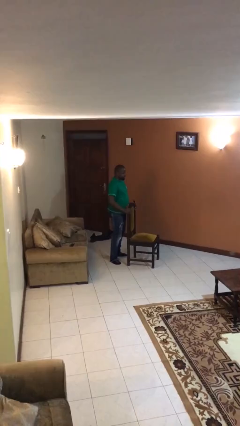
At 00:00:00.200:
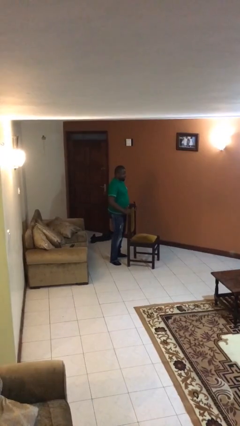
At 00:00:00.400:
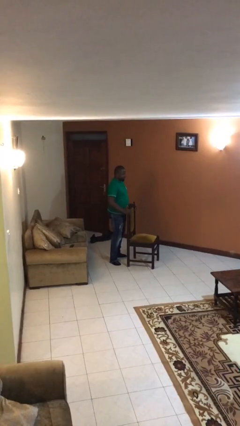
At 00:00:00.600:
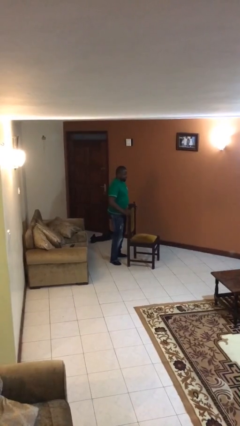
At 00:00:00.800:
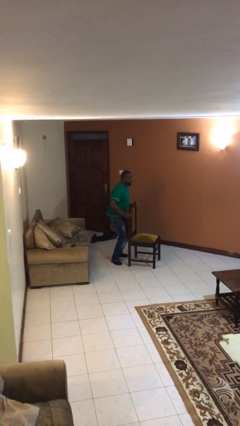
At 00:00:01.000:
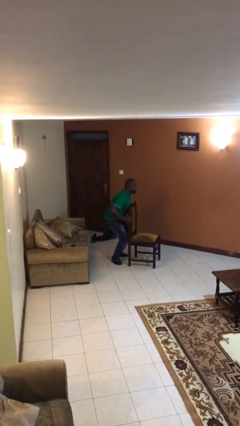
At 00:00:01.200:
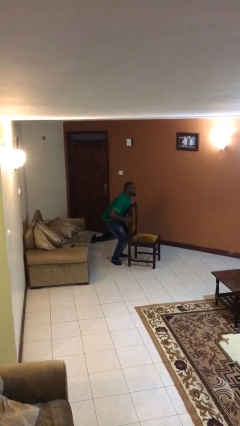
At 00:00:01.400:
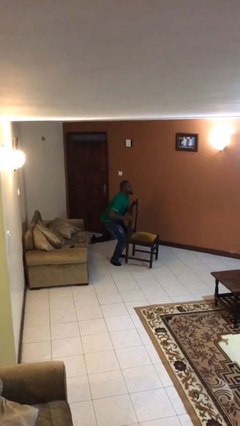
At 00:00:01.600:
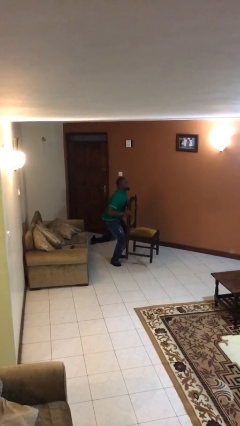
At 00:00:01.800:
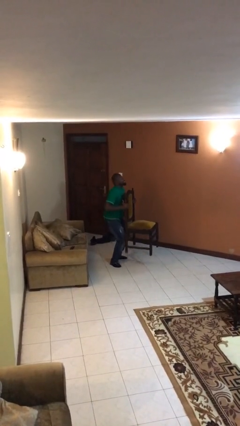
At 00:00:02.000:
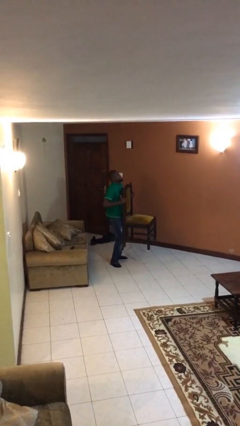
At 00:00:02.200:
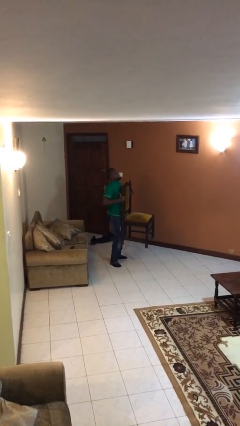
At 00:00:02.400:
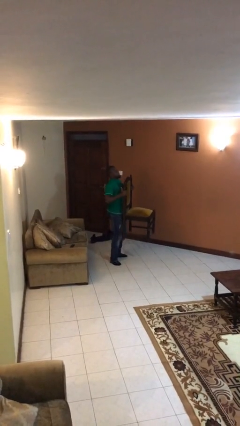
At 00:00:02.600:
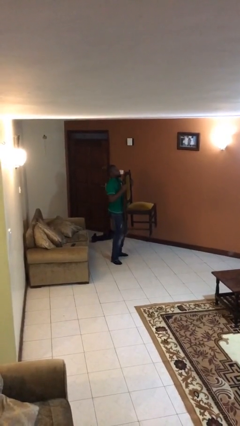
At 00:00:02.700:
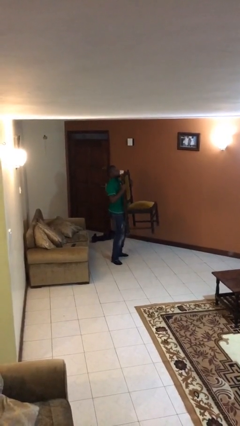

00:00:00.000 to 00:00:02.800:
person picks up object from floor

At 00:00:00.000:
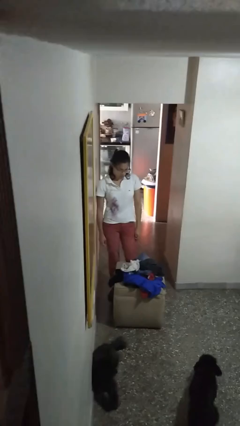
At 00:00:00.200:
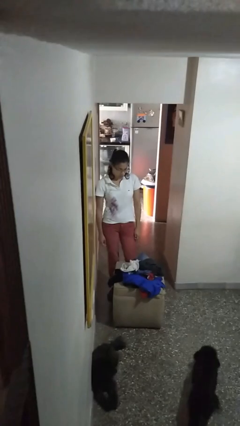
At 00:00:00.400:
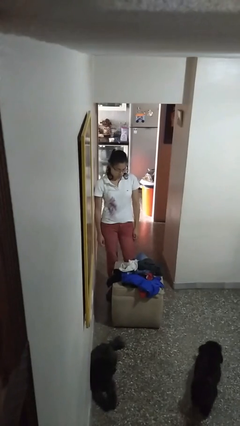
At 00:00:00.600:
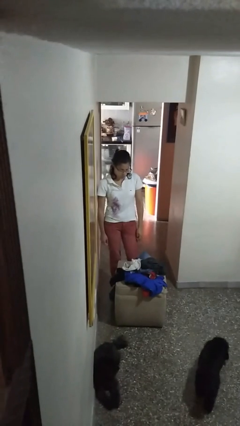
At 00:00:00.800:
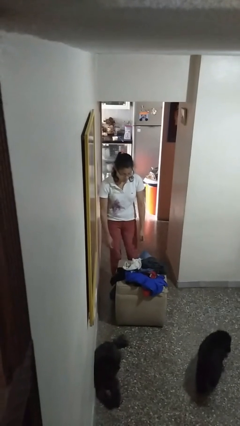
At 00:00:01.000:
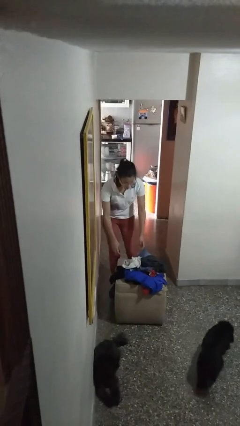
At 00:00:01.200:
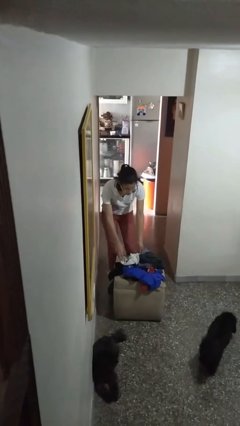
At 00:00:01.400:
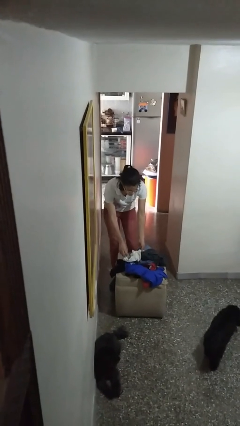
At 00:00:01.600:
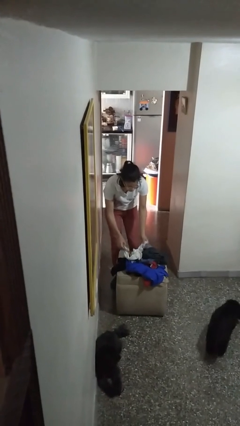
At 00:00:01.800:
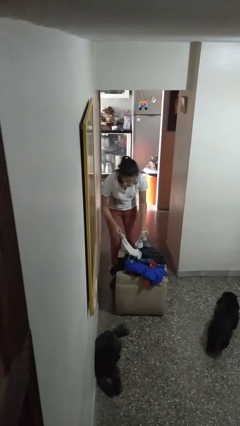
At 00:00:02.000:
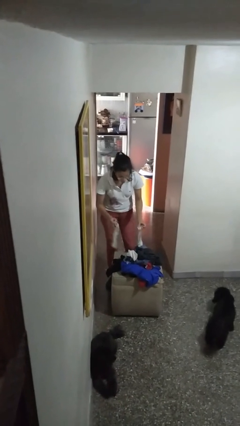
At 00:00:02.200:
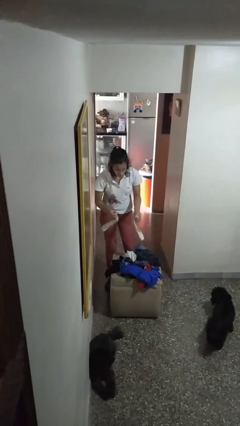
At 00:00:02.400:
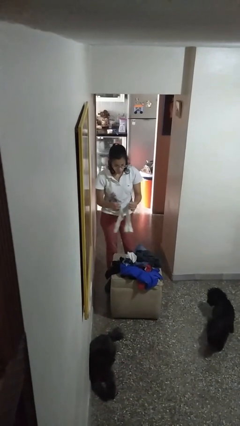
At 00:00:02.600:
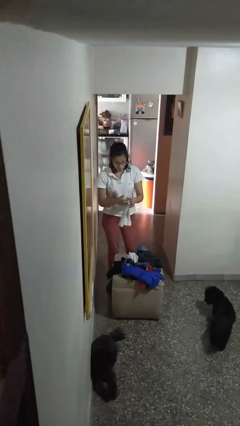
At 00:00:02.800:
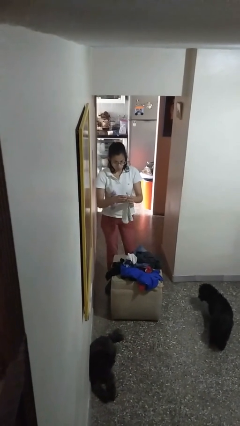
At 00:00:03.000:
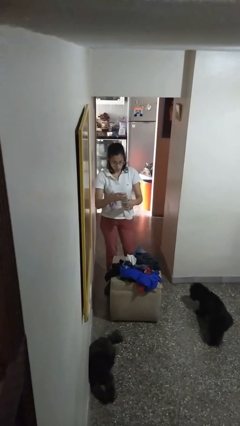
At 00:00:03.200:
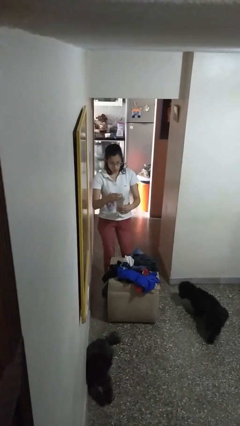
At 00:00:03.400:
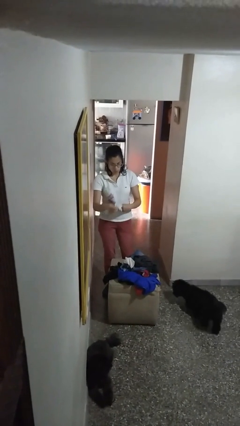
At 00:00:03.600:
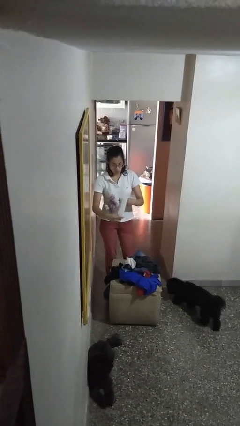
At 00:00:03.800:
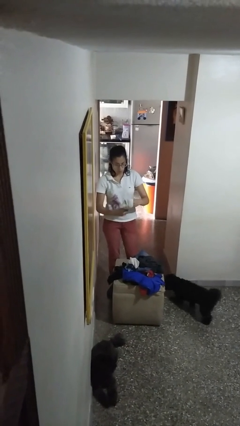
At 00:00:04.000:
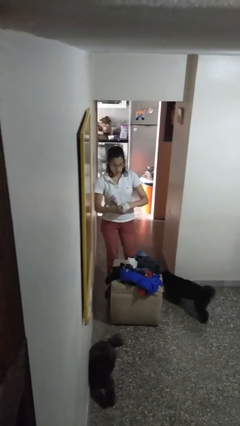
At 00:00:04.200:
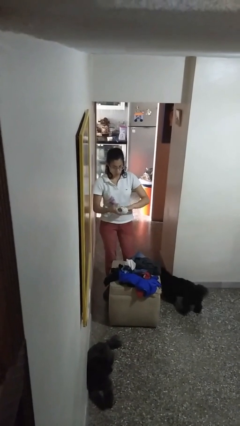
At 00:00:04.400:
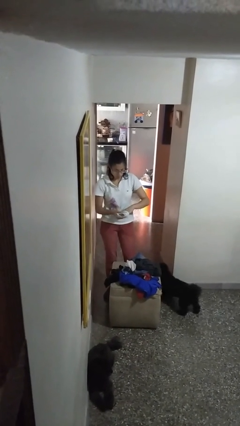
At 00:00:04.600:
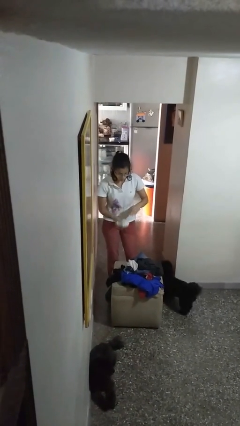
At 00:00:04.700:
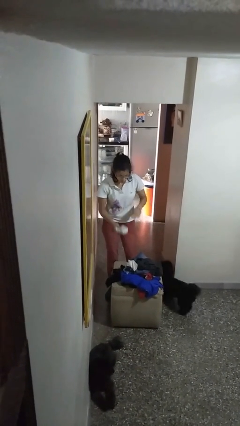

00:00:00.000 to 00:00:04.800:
person folds socks

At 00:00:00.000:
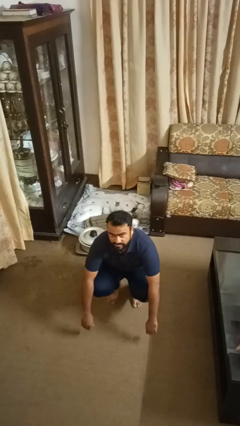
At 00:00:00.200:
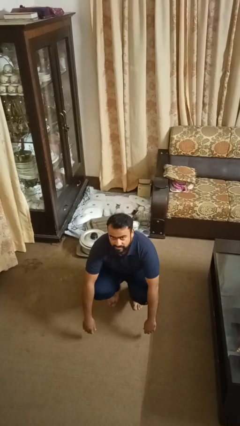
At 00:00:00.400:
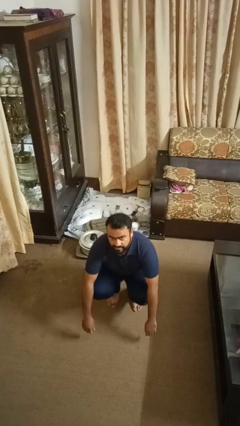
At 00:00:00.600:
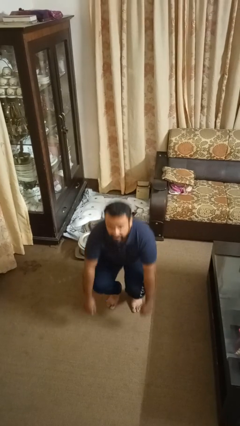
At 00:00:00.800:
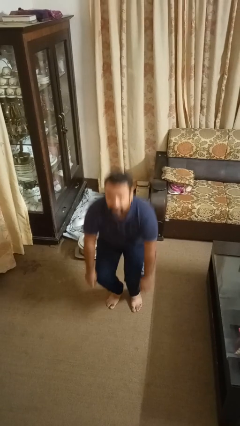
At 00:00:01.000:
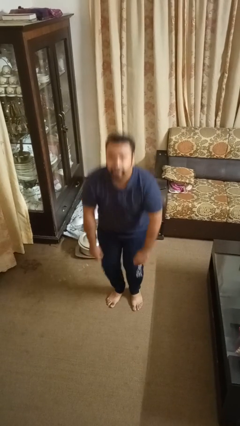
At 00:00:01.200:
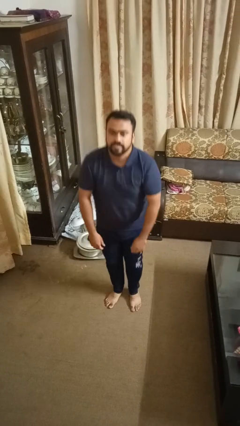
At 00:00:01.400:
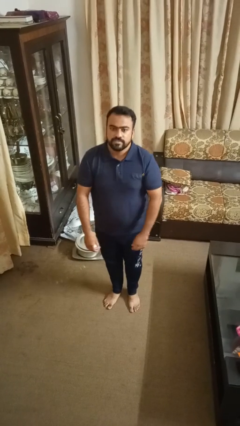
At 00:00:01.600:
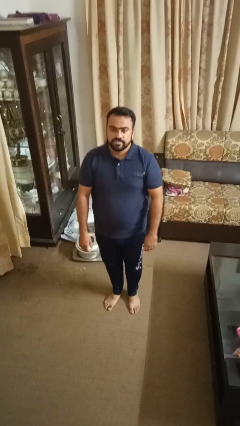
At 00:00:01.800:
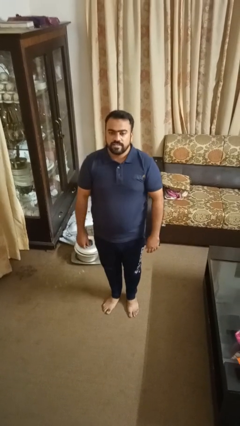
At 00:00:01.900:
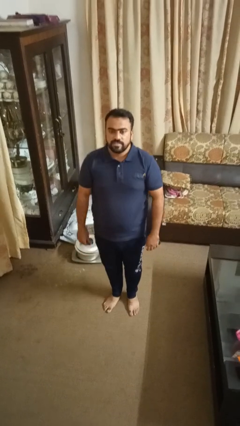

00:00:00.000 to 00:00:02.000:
person stands up

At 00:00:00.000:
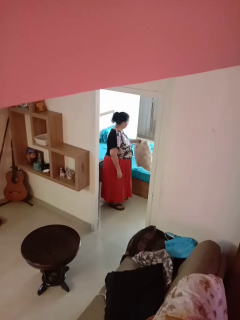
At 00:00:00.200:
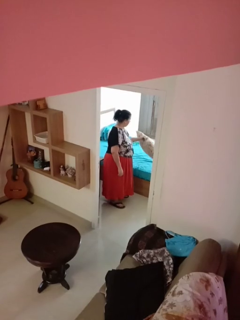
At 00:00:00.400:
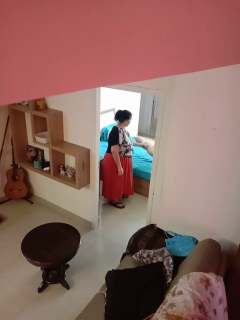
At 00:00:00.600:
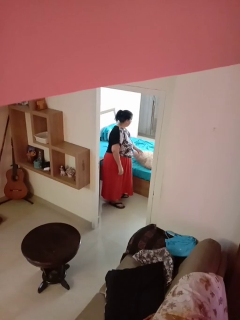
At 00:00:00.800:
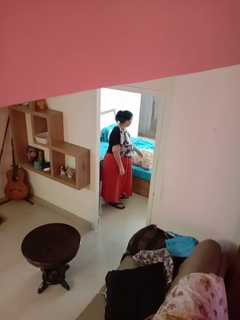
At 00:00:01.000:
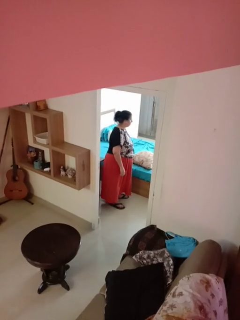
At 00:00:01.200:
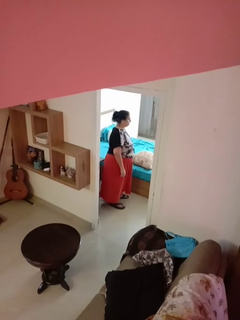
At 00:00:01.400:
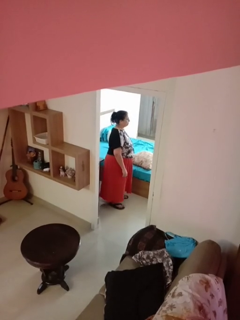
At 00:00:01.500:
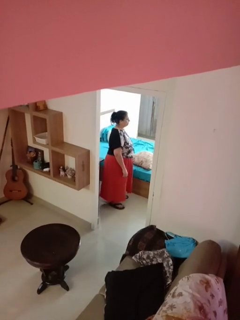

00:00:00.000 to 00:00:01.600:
person puts down object on bed

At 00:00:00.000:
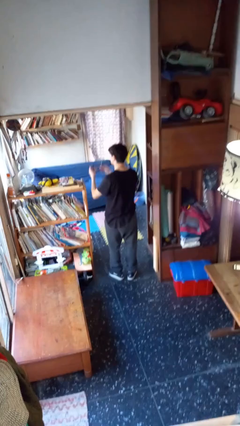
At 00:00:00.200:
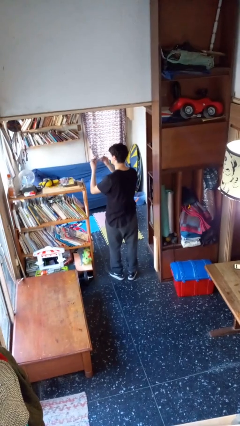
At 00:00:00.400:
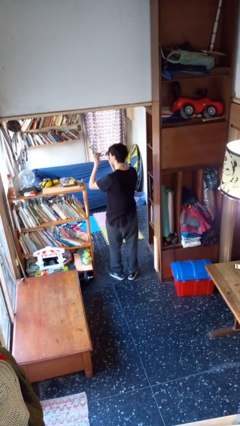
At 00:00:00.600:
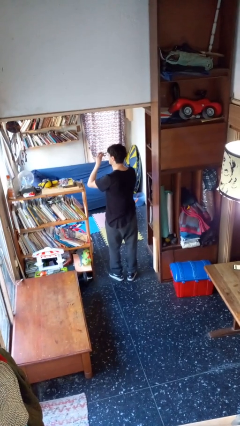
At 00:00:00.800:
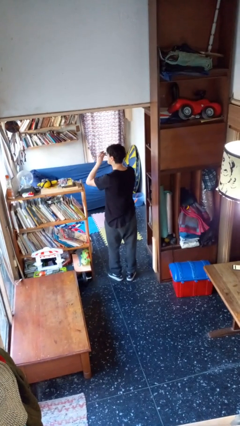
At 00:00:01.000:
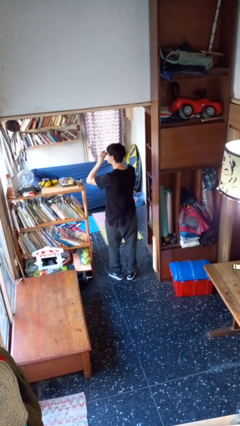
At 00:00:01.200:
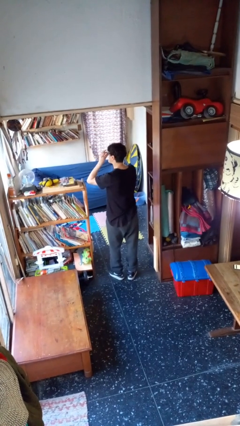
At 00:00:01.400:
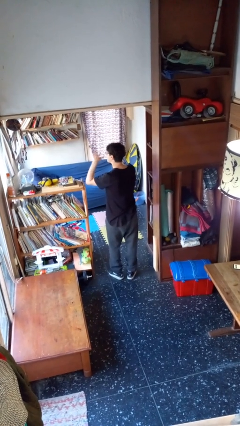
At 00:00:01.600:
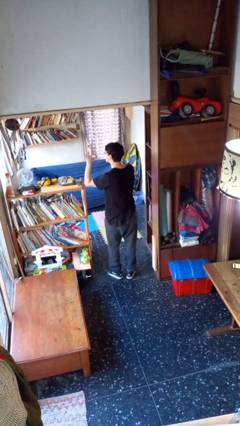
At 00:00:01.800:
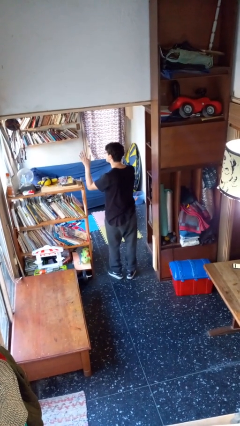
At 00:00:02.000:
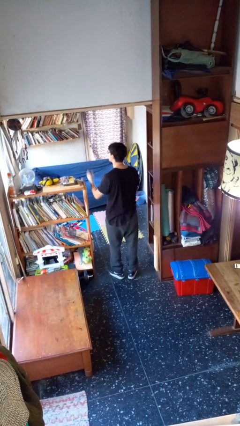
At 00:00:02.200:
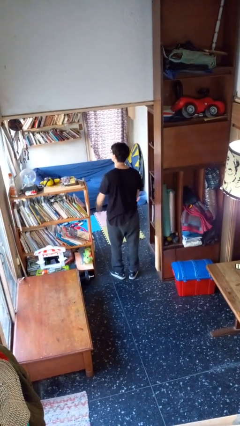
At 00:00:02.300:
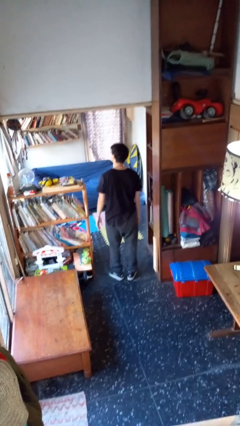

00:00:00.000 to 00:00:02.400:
person puts on glasses

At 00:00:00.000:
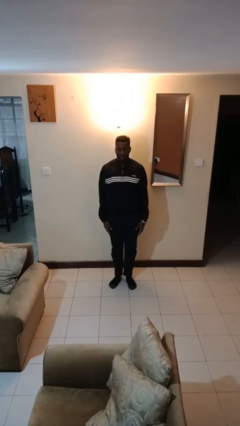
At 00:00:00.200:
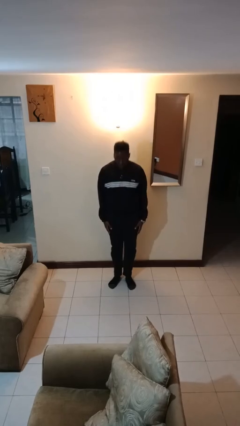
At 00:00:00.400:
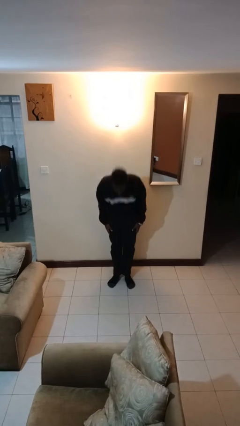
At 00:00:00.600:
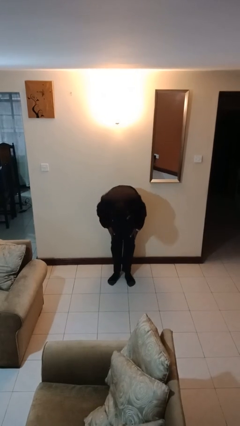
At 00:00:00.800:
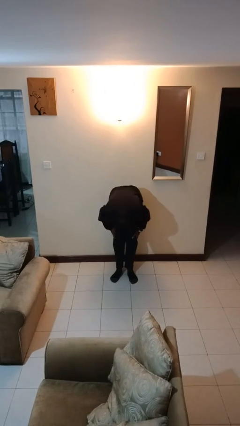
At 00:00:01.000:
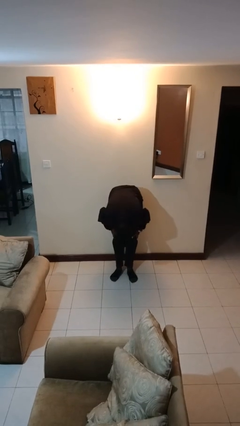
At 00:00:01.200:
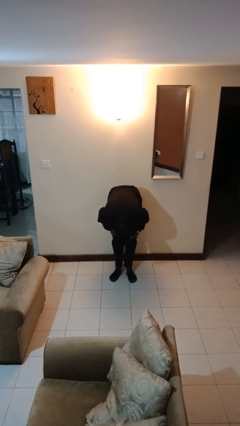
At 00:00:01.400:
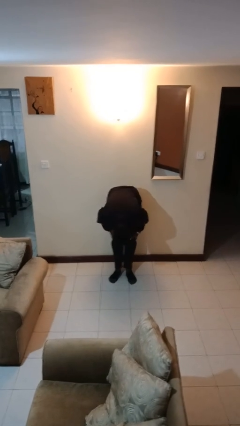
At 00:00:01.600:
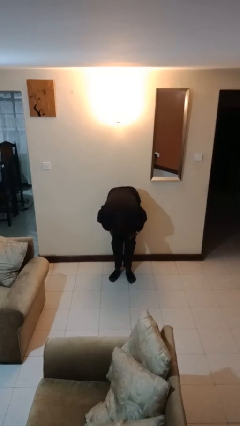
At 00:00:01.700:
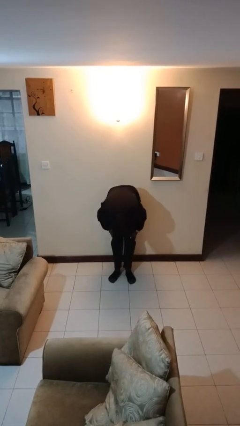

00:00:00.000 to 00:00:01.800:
person bows

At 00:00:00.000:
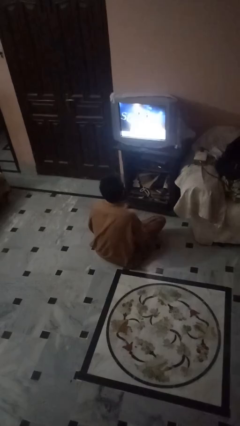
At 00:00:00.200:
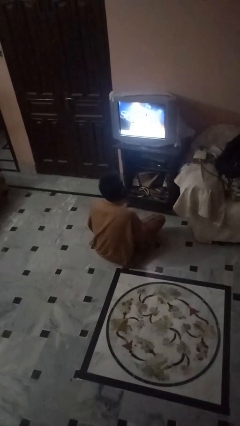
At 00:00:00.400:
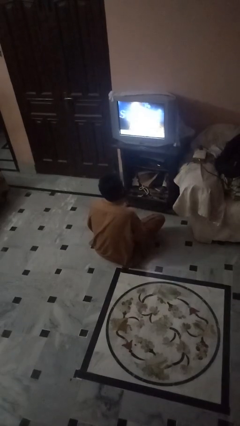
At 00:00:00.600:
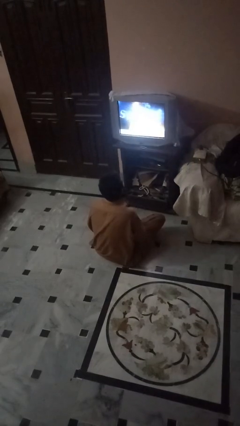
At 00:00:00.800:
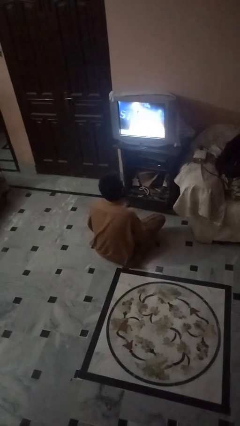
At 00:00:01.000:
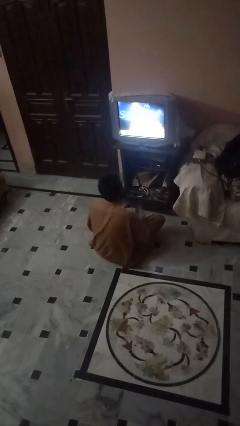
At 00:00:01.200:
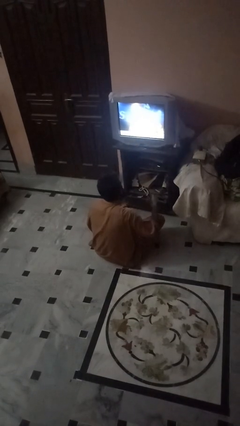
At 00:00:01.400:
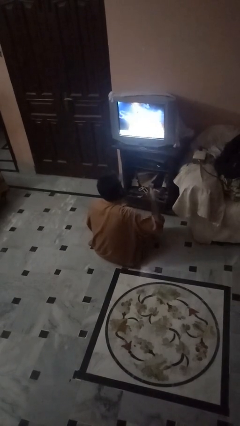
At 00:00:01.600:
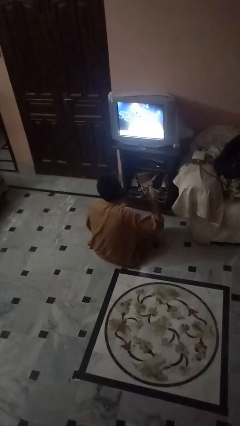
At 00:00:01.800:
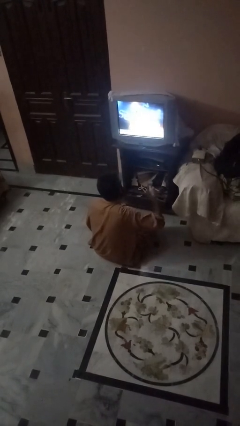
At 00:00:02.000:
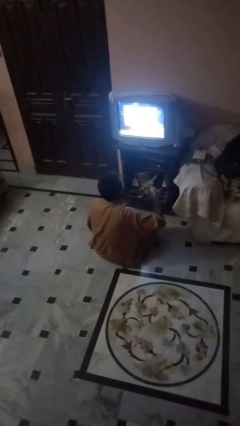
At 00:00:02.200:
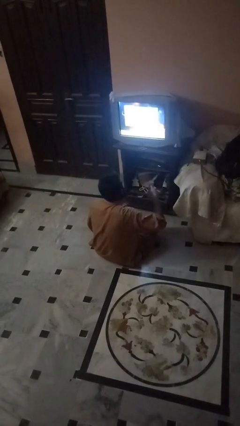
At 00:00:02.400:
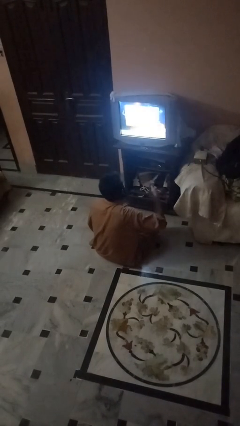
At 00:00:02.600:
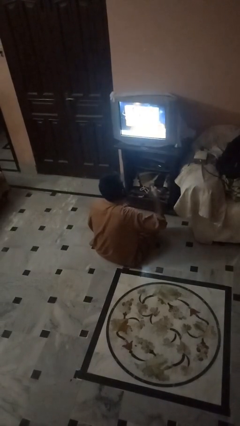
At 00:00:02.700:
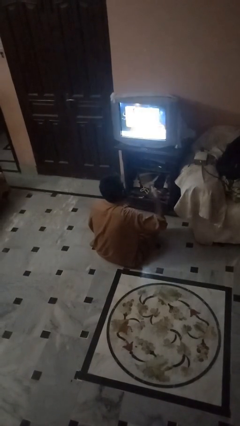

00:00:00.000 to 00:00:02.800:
person uses television remote
